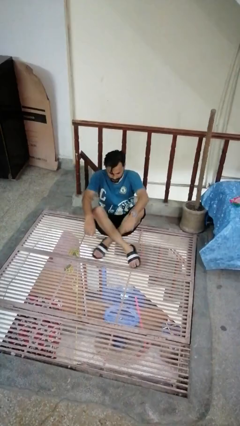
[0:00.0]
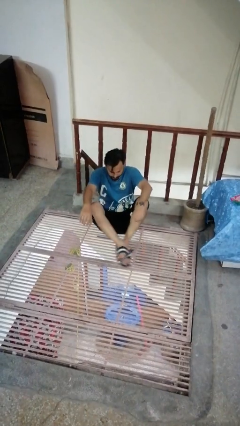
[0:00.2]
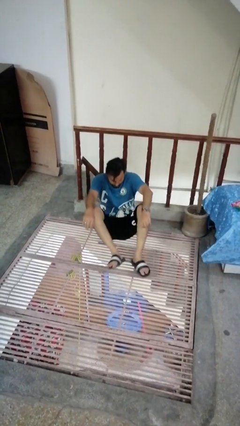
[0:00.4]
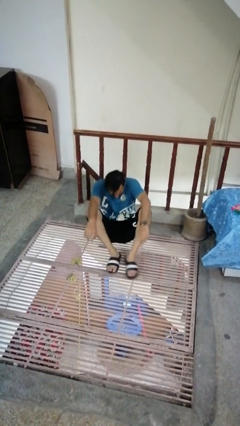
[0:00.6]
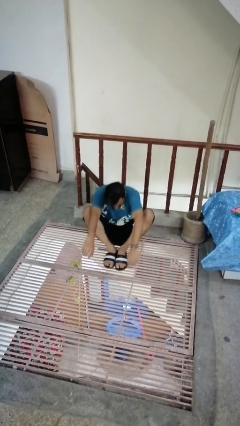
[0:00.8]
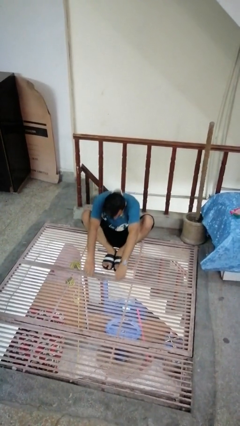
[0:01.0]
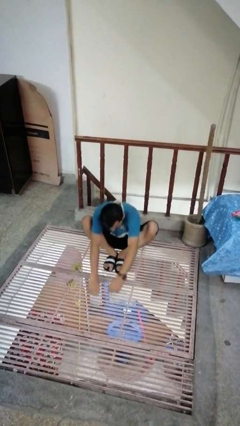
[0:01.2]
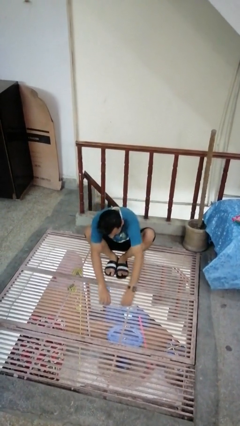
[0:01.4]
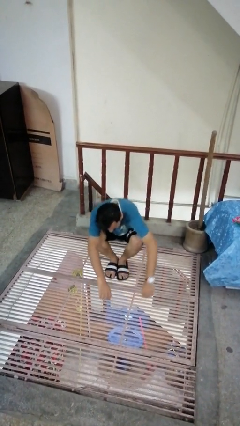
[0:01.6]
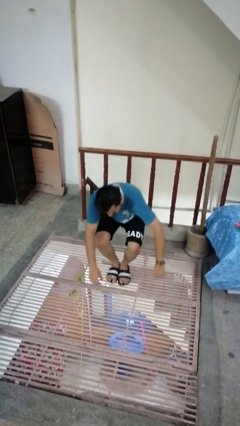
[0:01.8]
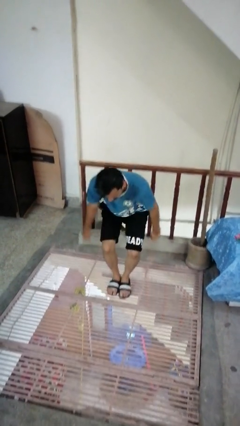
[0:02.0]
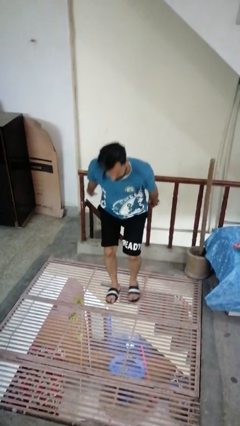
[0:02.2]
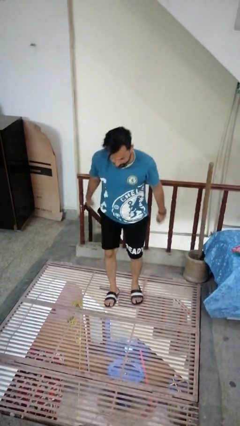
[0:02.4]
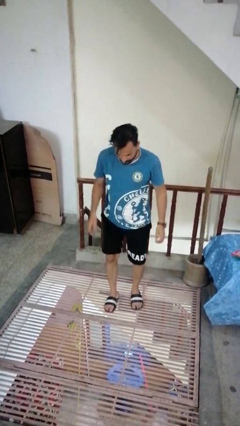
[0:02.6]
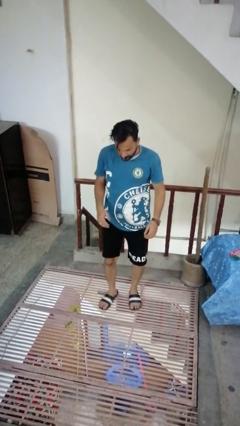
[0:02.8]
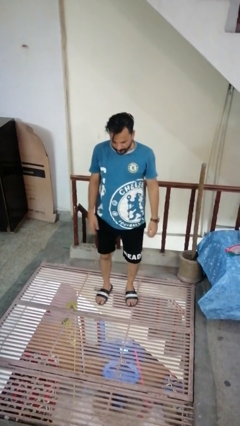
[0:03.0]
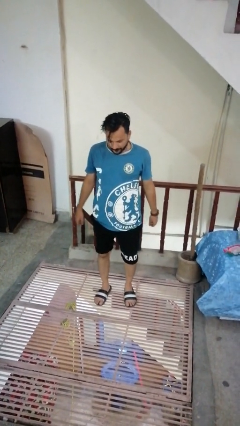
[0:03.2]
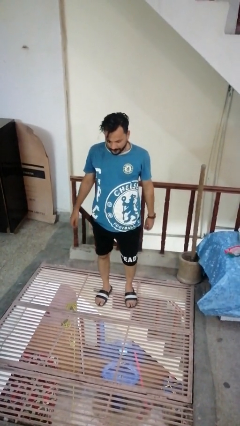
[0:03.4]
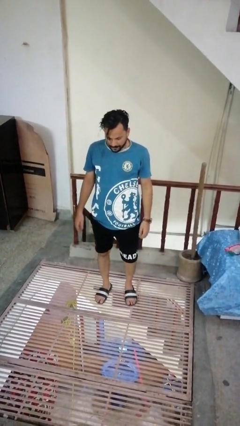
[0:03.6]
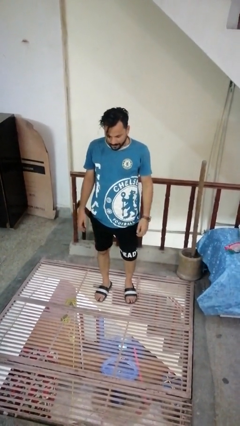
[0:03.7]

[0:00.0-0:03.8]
person stands up from floor

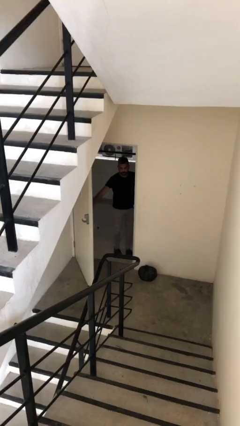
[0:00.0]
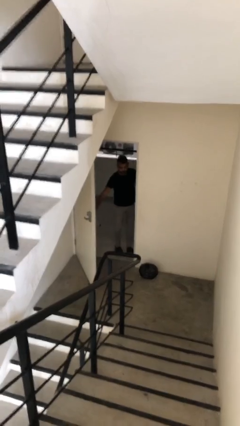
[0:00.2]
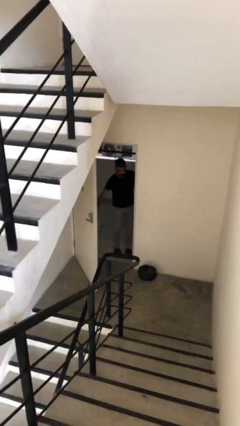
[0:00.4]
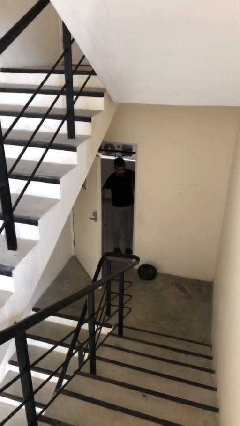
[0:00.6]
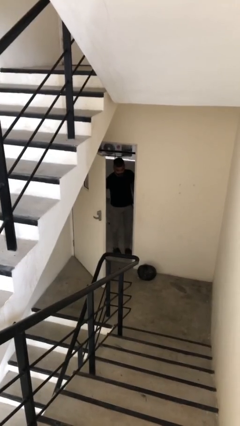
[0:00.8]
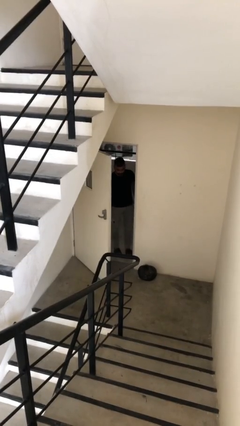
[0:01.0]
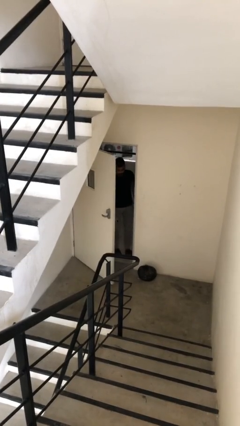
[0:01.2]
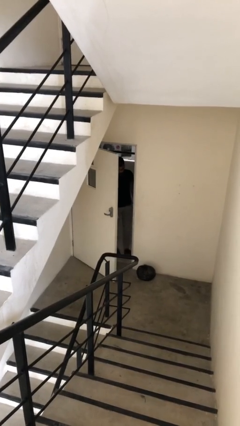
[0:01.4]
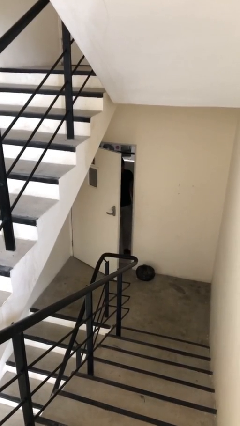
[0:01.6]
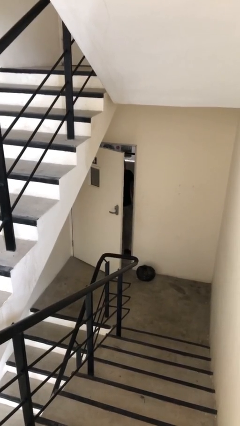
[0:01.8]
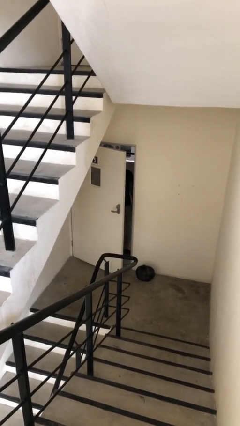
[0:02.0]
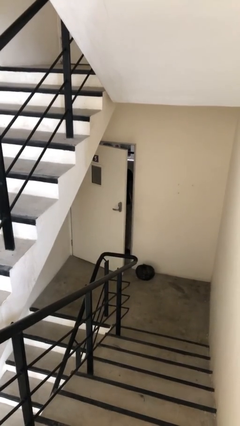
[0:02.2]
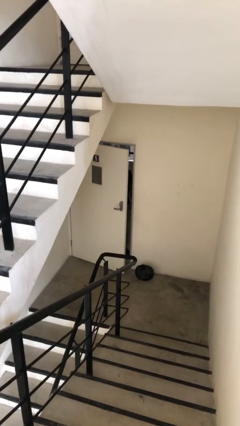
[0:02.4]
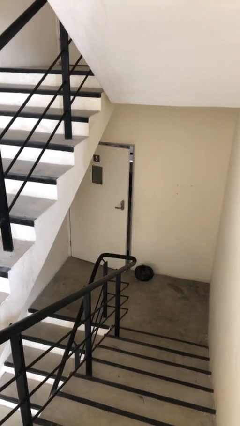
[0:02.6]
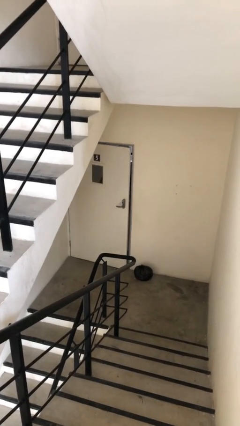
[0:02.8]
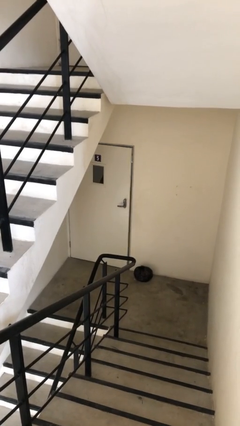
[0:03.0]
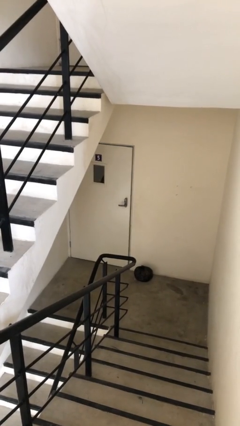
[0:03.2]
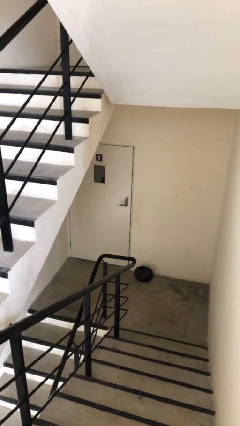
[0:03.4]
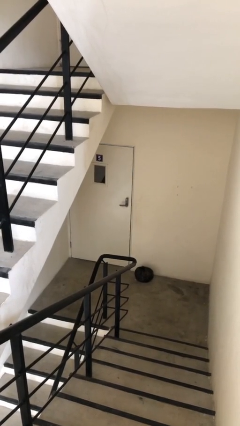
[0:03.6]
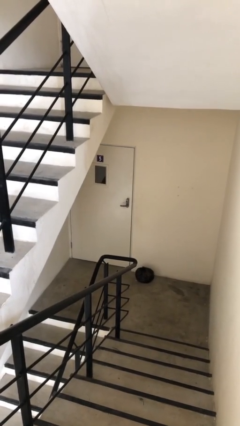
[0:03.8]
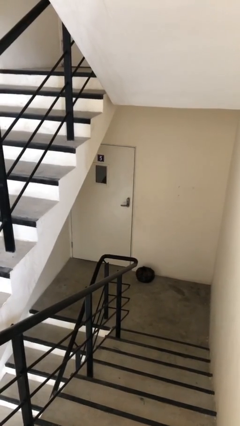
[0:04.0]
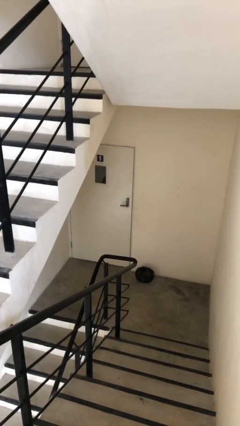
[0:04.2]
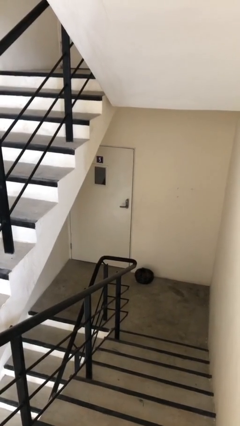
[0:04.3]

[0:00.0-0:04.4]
person closes facility door

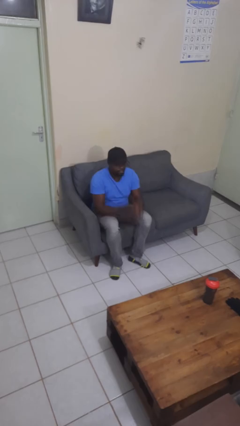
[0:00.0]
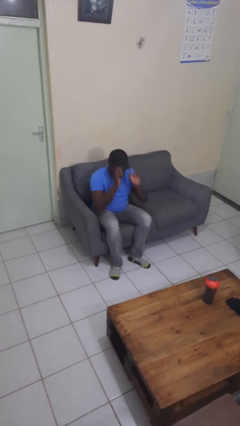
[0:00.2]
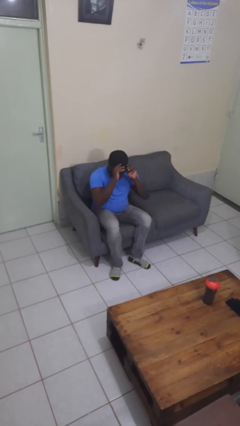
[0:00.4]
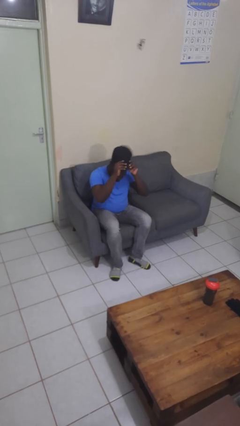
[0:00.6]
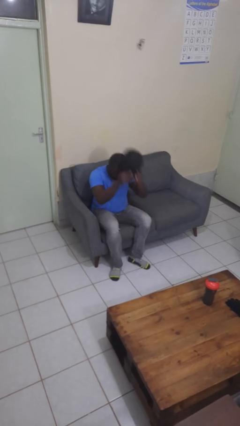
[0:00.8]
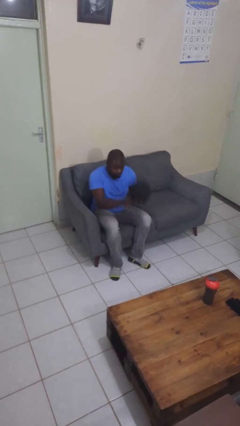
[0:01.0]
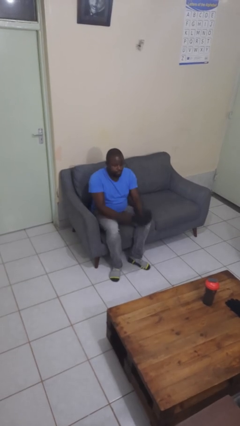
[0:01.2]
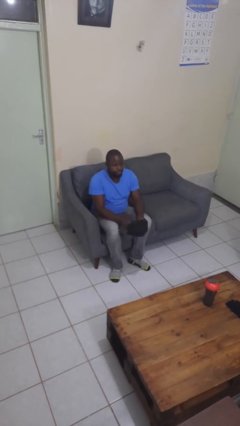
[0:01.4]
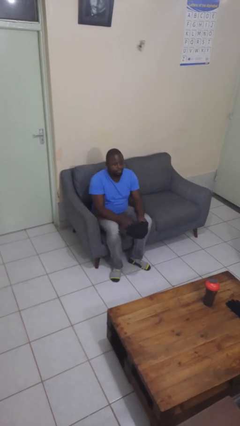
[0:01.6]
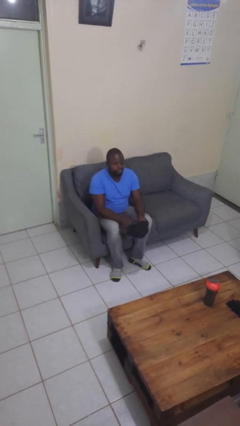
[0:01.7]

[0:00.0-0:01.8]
person takes off hat

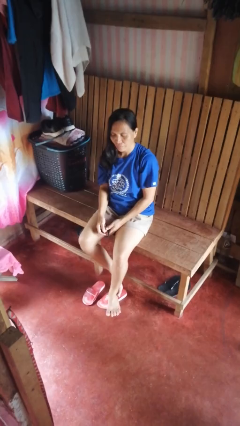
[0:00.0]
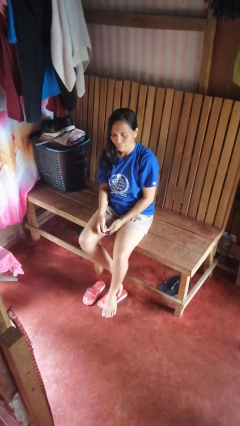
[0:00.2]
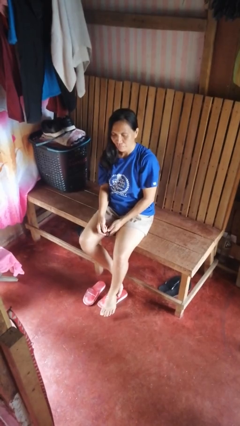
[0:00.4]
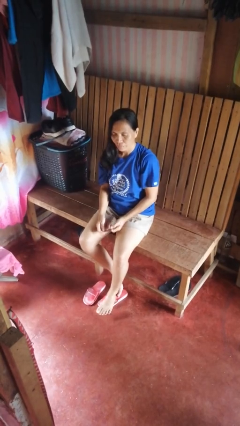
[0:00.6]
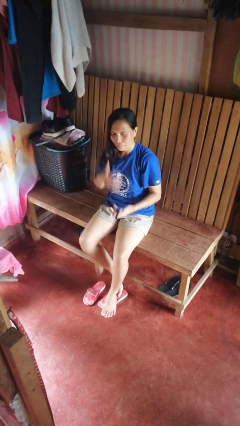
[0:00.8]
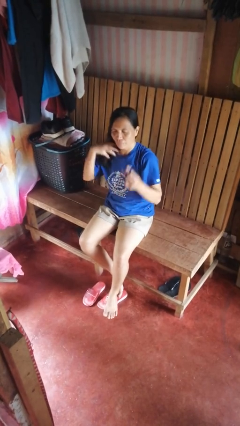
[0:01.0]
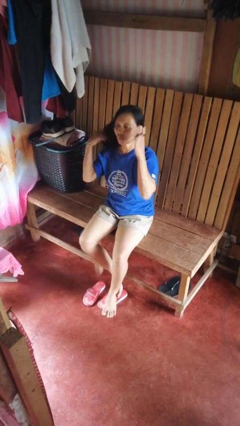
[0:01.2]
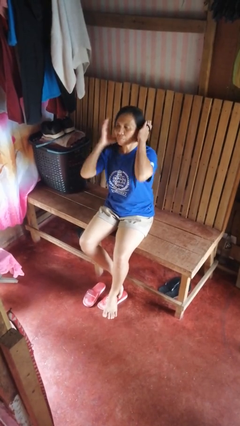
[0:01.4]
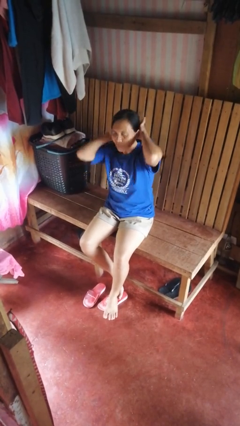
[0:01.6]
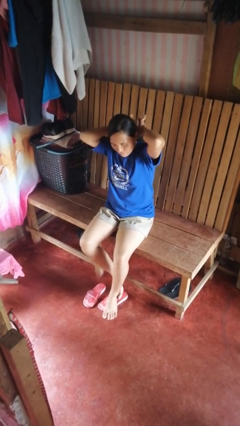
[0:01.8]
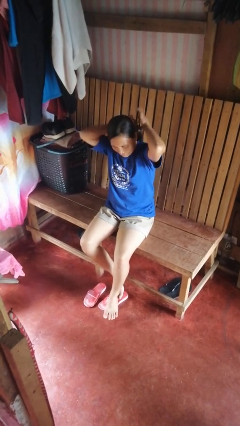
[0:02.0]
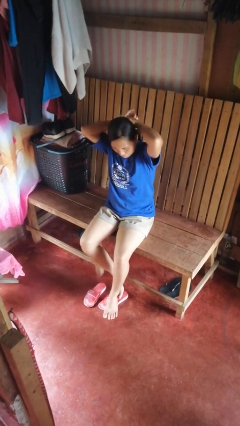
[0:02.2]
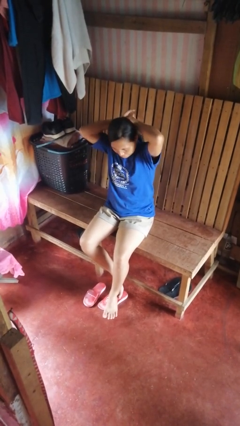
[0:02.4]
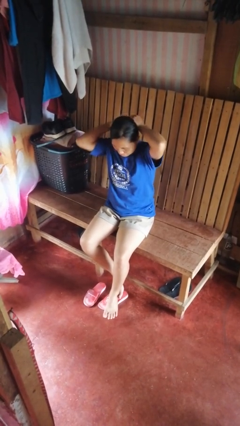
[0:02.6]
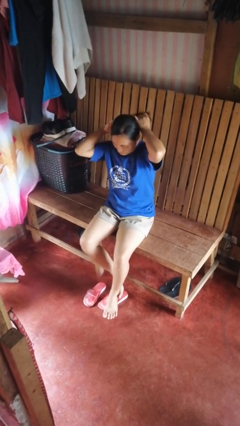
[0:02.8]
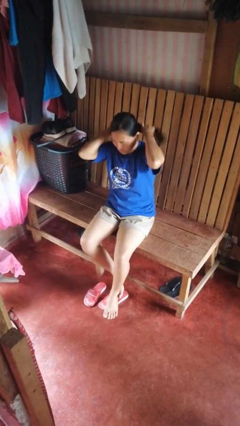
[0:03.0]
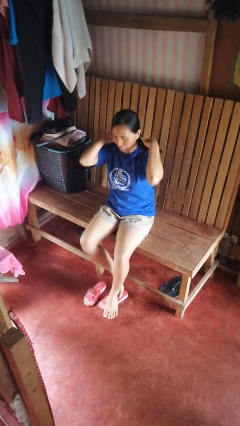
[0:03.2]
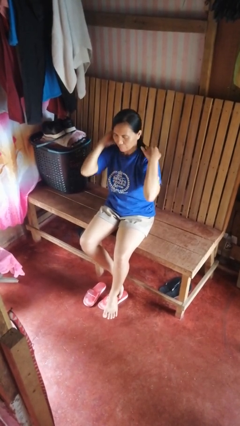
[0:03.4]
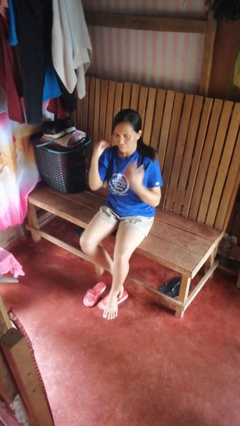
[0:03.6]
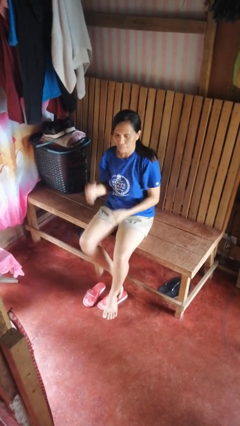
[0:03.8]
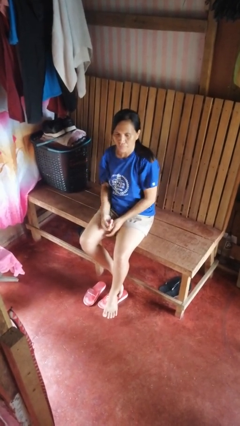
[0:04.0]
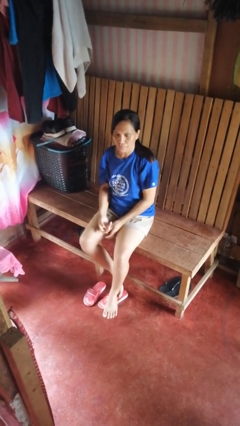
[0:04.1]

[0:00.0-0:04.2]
person puts hair in ponytail

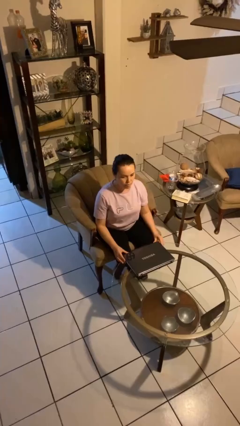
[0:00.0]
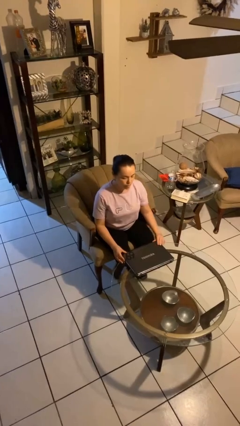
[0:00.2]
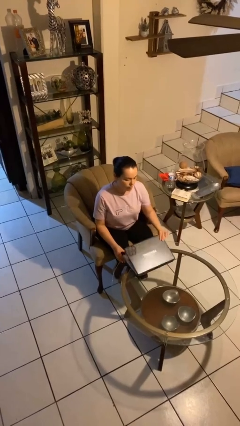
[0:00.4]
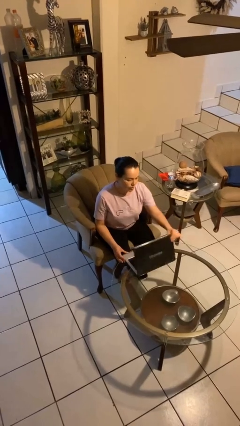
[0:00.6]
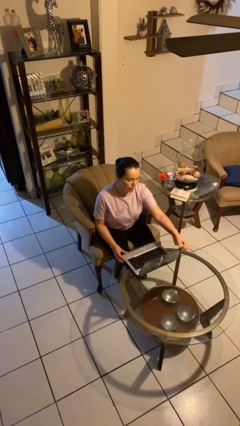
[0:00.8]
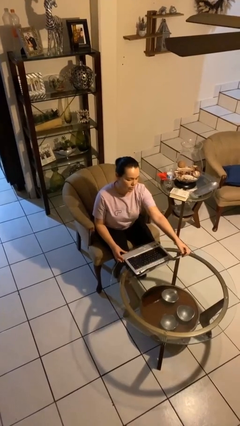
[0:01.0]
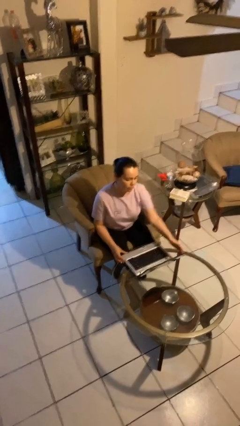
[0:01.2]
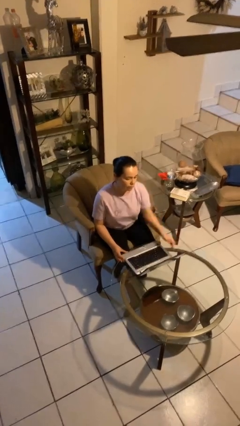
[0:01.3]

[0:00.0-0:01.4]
person opens laptop

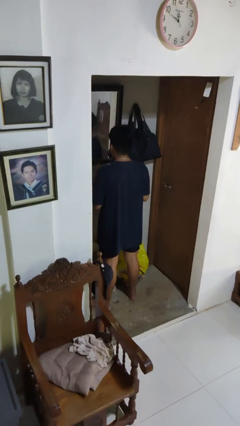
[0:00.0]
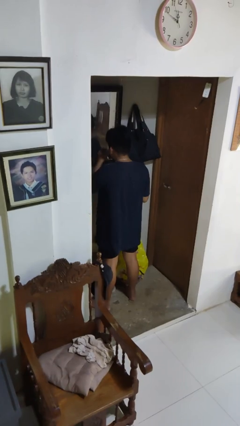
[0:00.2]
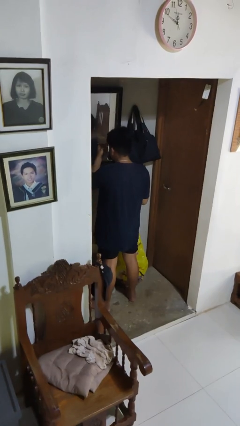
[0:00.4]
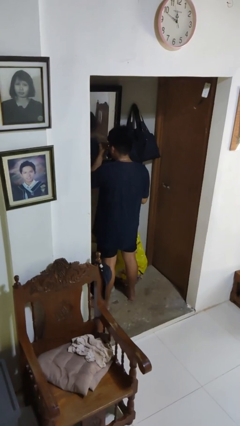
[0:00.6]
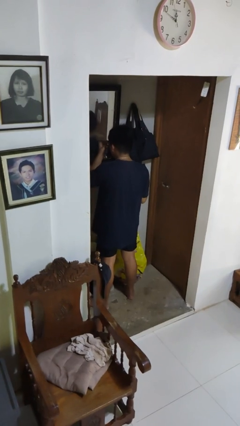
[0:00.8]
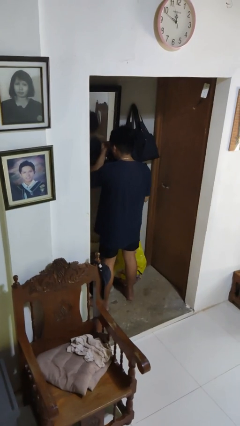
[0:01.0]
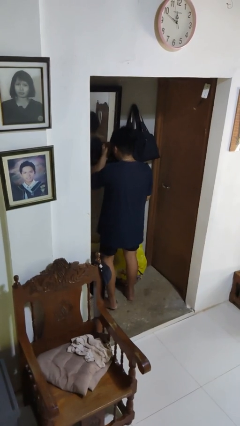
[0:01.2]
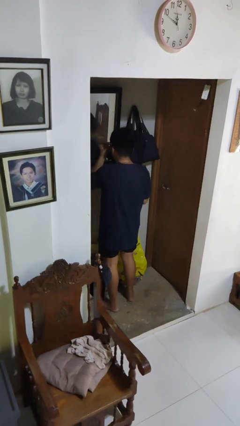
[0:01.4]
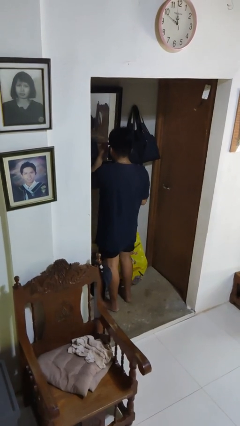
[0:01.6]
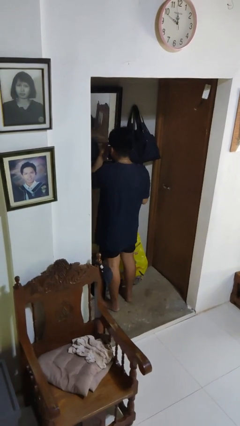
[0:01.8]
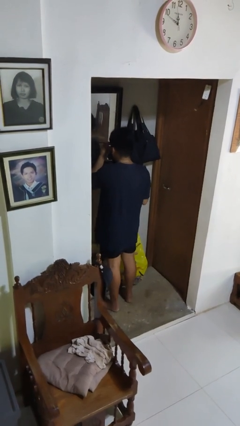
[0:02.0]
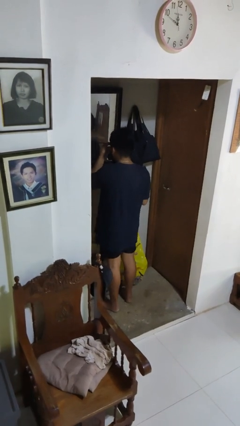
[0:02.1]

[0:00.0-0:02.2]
person applies eye makeup
